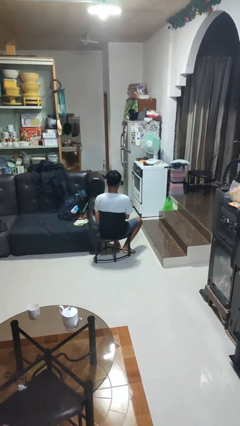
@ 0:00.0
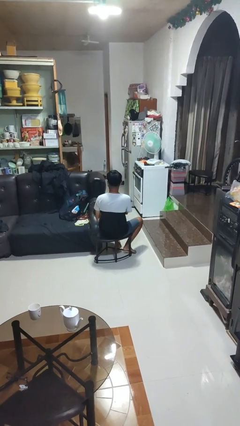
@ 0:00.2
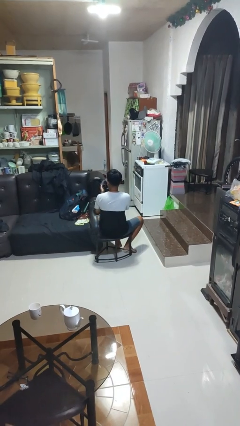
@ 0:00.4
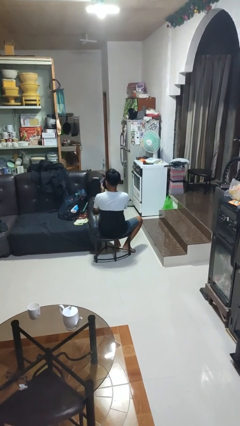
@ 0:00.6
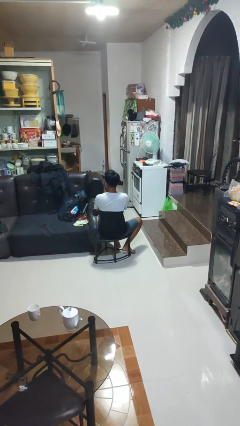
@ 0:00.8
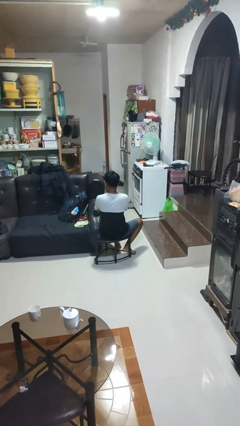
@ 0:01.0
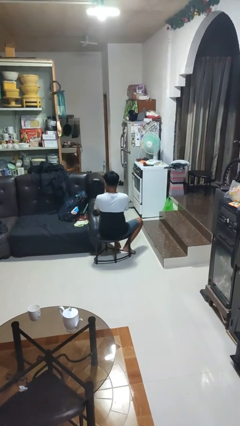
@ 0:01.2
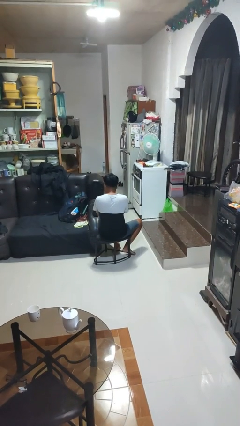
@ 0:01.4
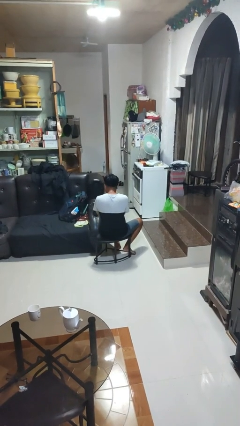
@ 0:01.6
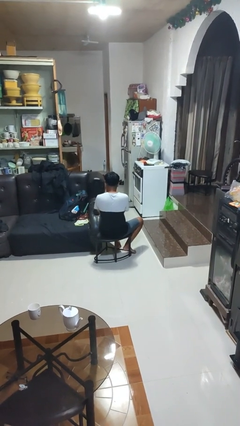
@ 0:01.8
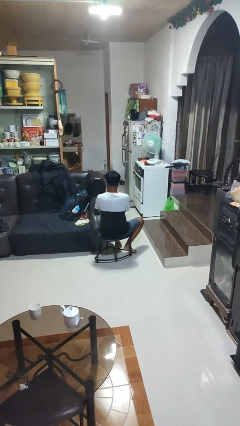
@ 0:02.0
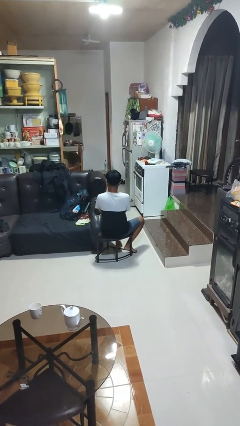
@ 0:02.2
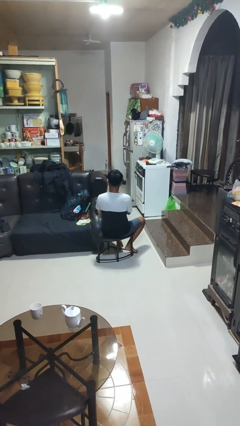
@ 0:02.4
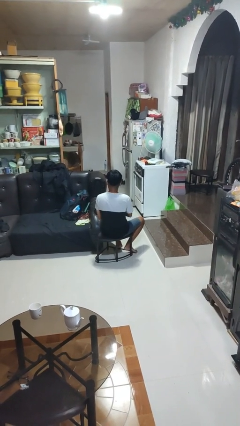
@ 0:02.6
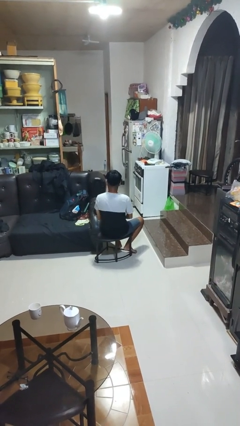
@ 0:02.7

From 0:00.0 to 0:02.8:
person blows nose

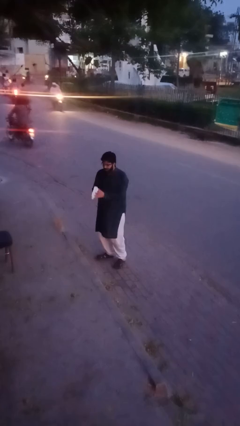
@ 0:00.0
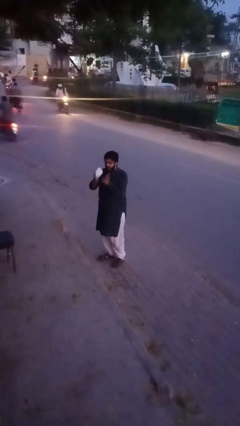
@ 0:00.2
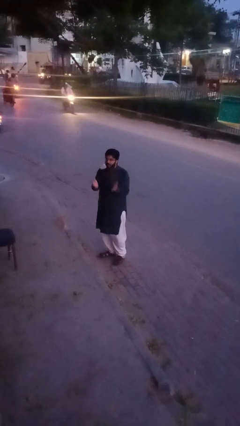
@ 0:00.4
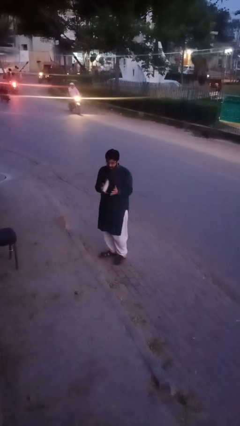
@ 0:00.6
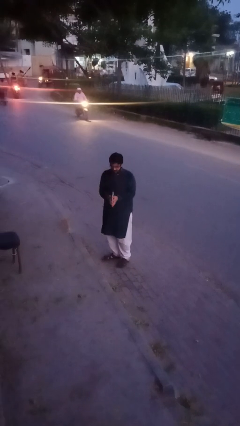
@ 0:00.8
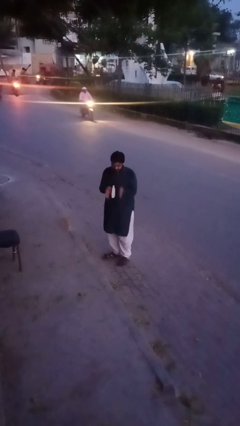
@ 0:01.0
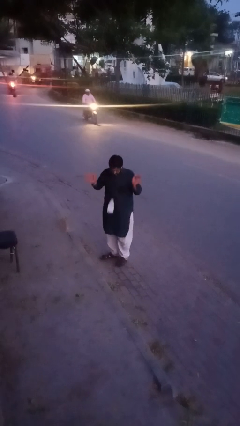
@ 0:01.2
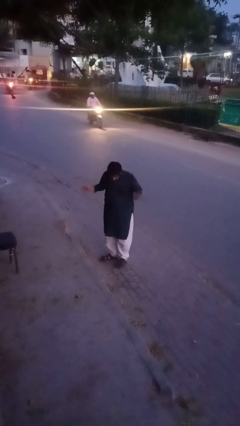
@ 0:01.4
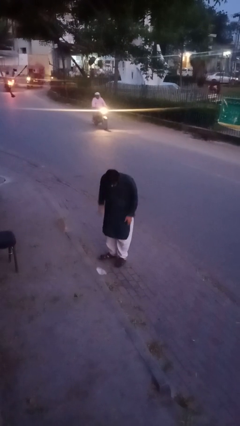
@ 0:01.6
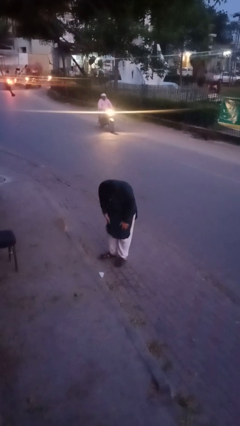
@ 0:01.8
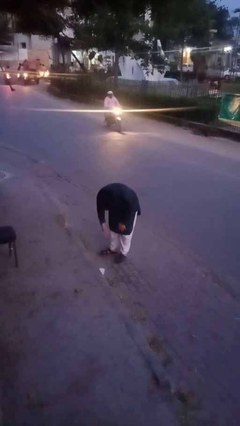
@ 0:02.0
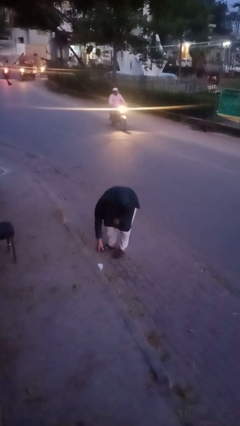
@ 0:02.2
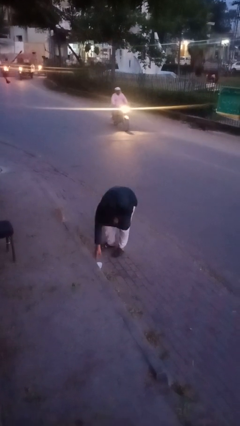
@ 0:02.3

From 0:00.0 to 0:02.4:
person drops object

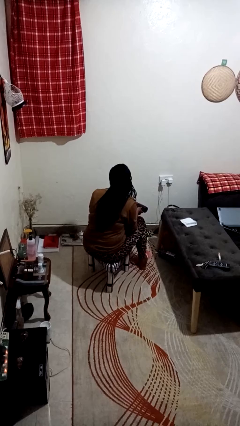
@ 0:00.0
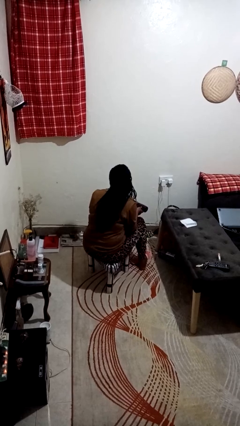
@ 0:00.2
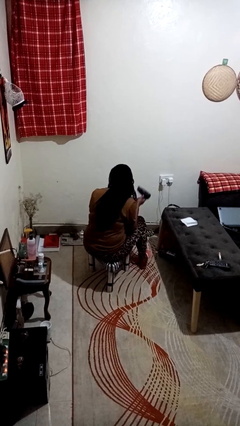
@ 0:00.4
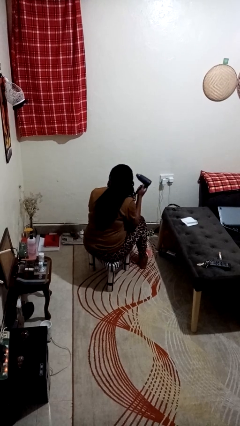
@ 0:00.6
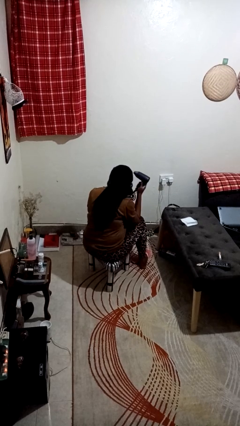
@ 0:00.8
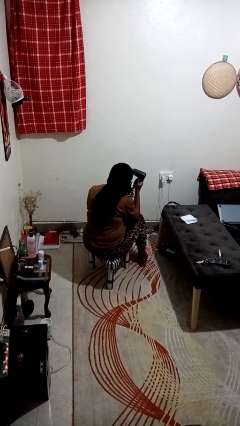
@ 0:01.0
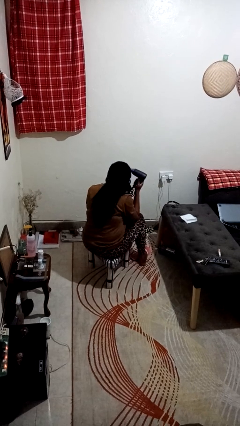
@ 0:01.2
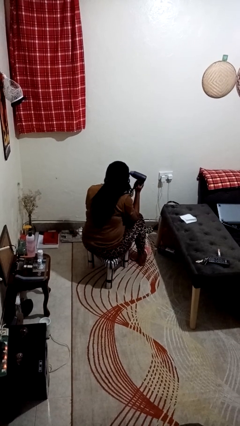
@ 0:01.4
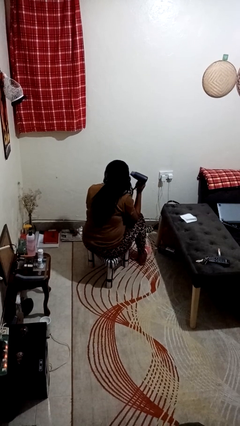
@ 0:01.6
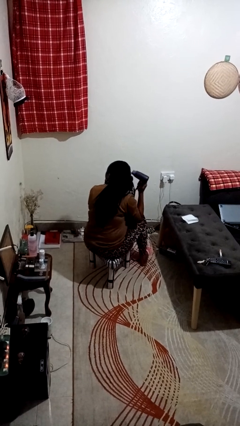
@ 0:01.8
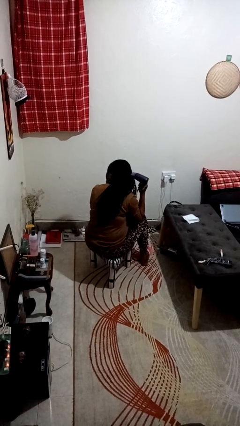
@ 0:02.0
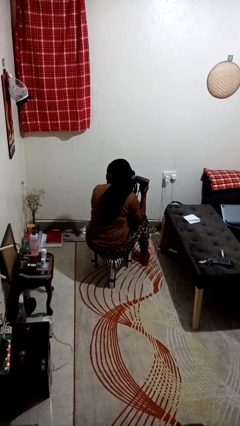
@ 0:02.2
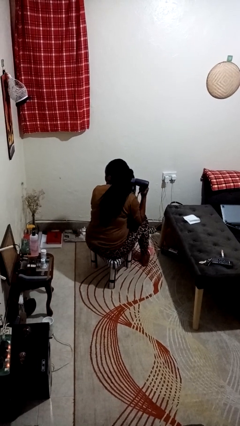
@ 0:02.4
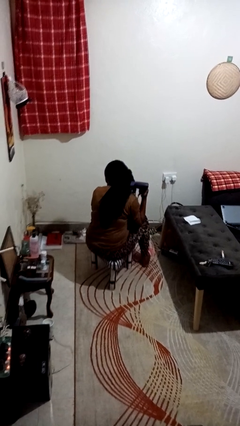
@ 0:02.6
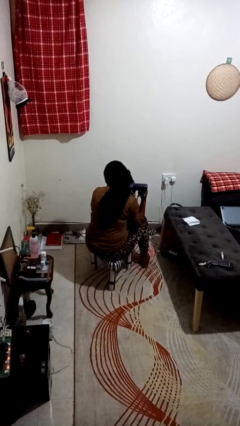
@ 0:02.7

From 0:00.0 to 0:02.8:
person dries hair with hairdryer

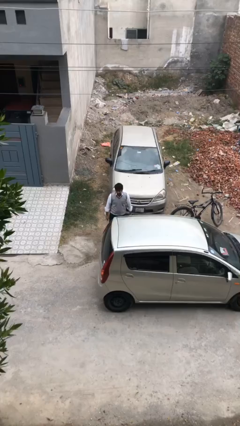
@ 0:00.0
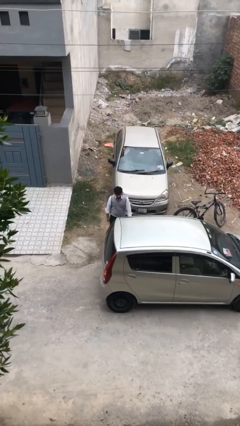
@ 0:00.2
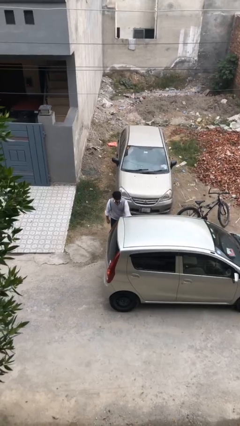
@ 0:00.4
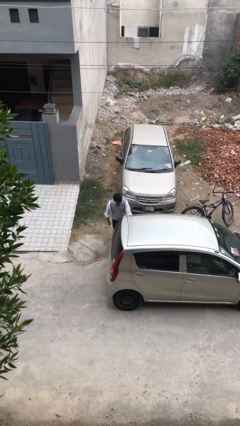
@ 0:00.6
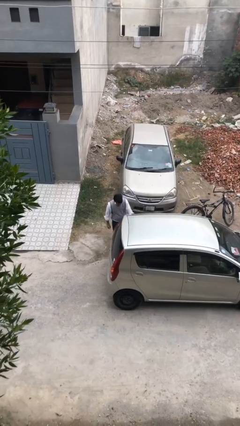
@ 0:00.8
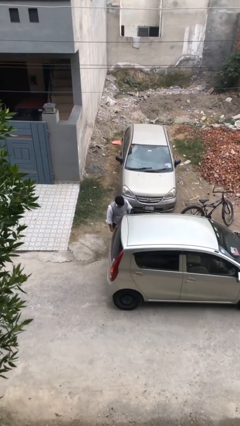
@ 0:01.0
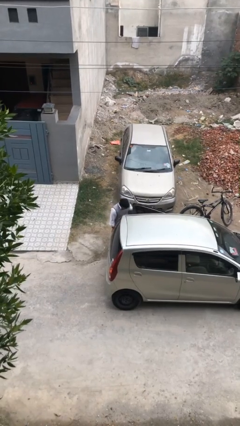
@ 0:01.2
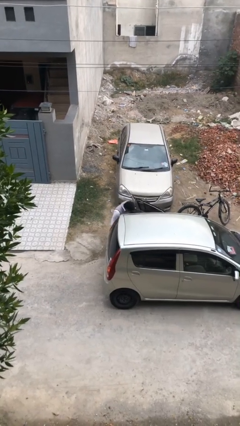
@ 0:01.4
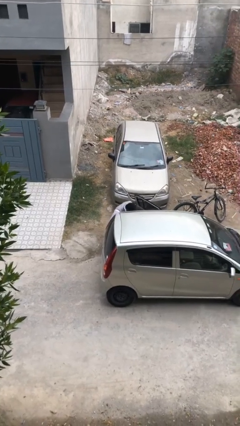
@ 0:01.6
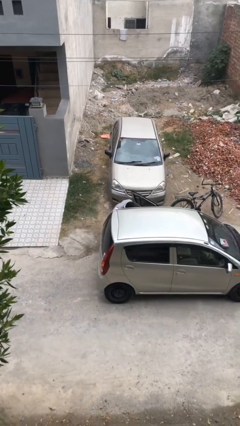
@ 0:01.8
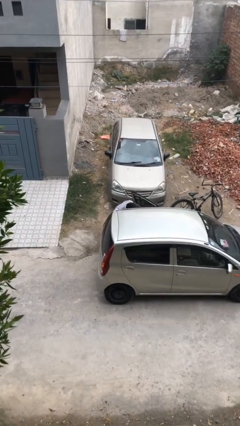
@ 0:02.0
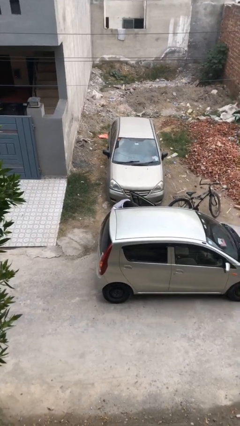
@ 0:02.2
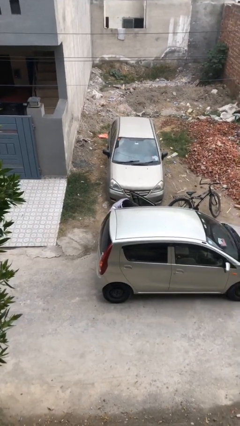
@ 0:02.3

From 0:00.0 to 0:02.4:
person opens car door

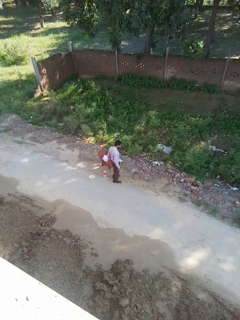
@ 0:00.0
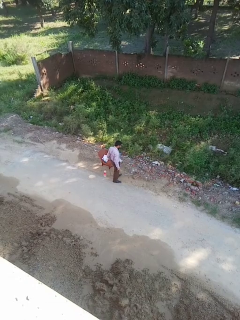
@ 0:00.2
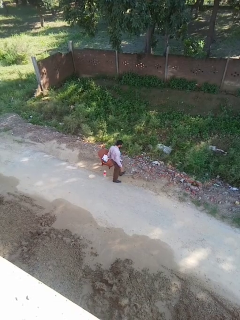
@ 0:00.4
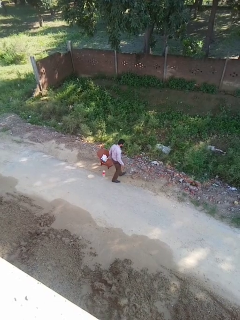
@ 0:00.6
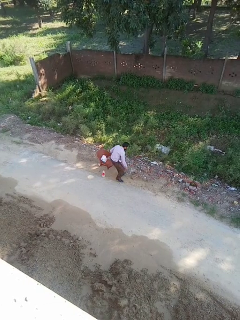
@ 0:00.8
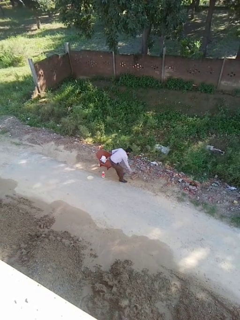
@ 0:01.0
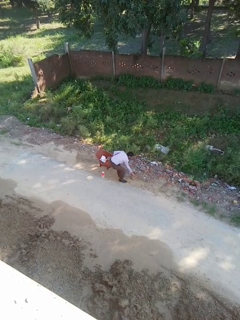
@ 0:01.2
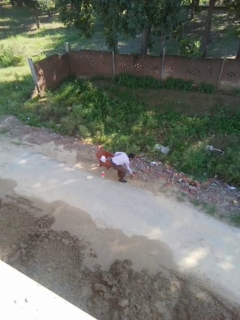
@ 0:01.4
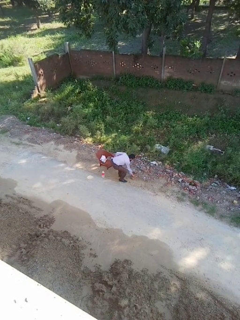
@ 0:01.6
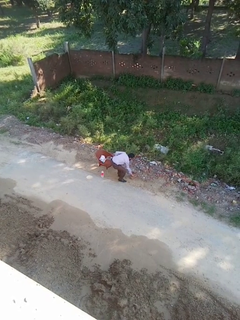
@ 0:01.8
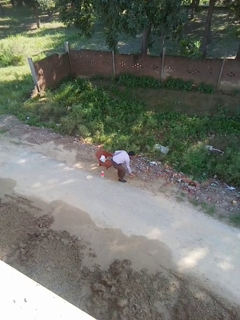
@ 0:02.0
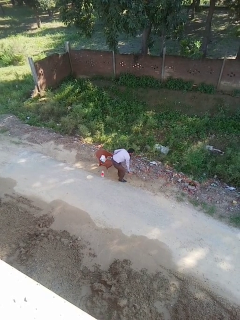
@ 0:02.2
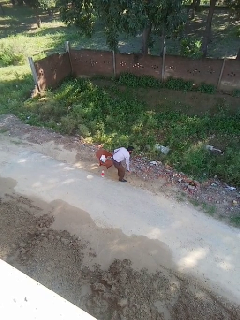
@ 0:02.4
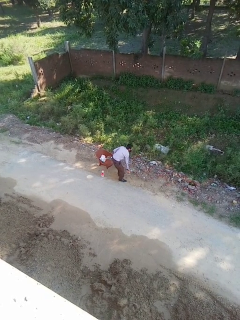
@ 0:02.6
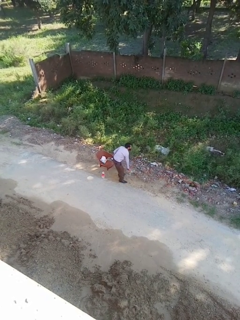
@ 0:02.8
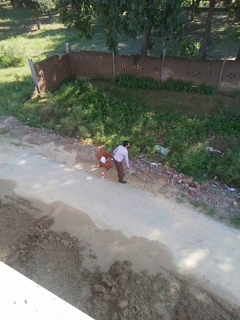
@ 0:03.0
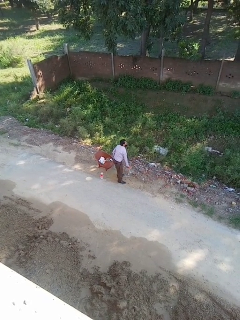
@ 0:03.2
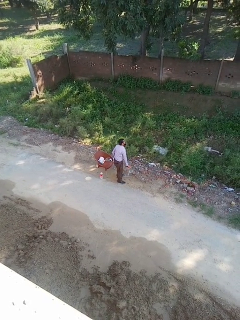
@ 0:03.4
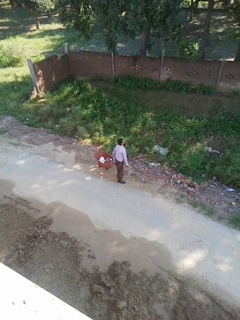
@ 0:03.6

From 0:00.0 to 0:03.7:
person picks up object from floor

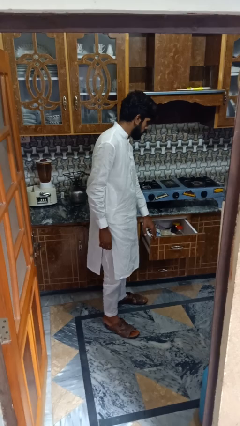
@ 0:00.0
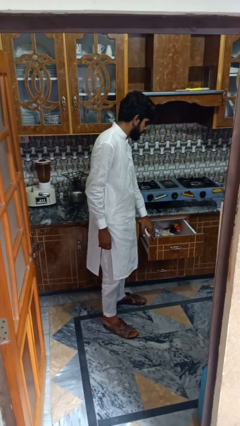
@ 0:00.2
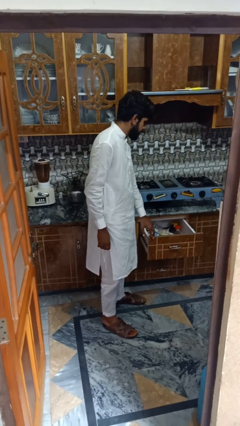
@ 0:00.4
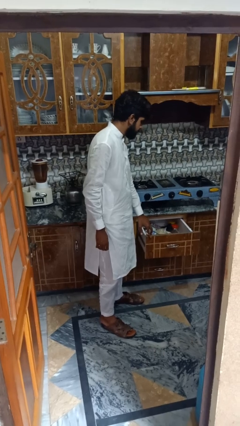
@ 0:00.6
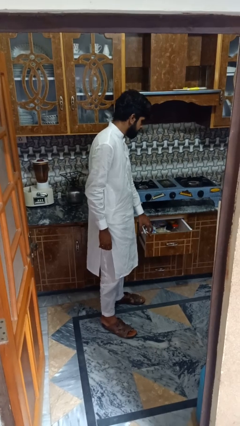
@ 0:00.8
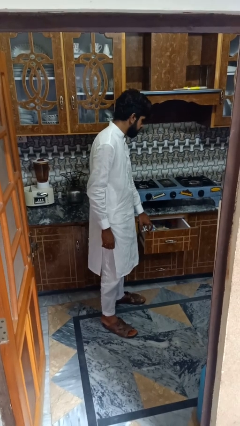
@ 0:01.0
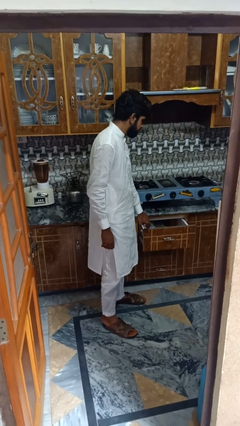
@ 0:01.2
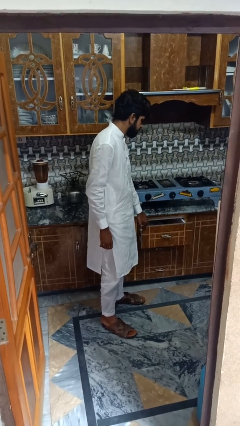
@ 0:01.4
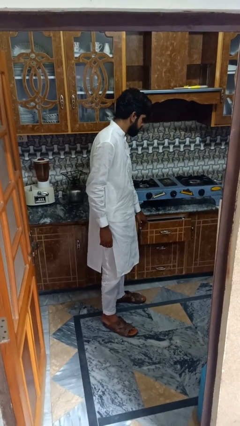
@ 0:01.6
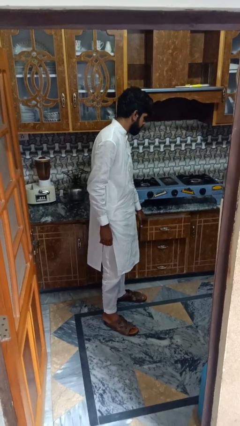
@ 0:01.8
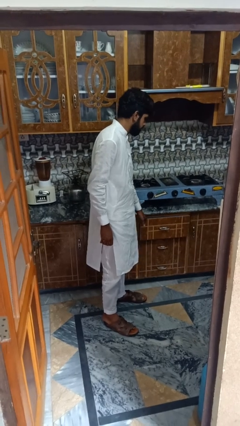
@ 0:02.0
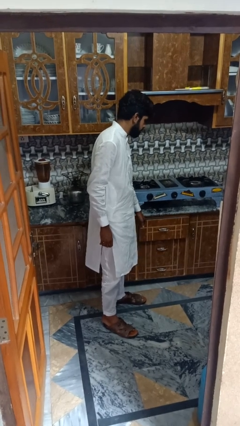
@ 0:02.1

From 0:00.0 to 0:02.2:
person closes kitchen drawer

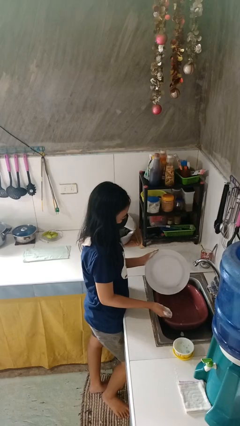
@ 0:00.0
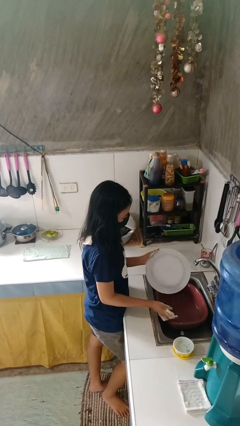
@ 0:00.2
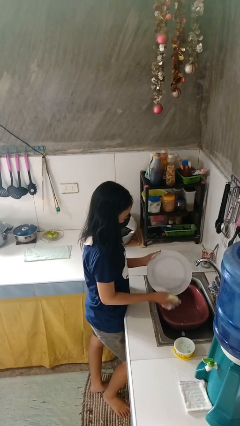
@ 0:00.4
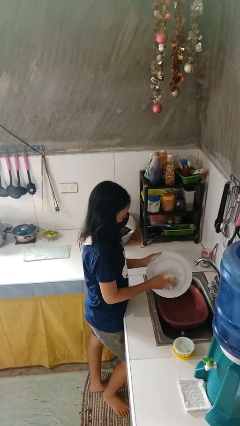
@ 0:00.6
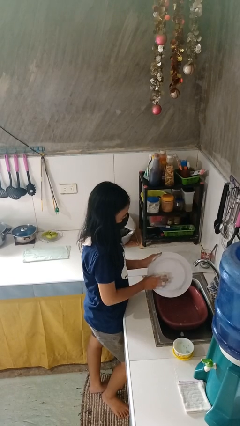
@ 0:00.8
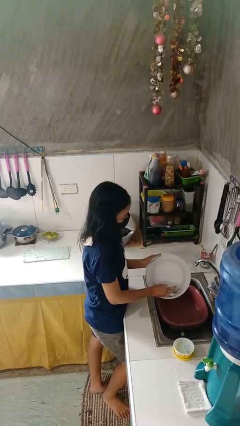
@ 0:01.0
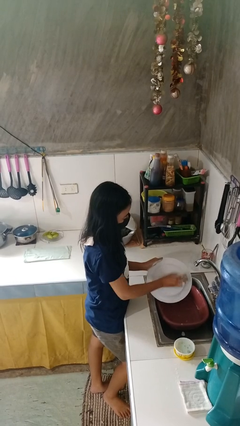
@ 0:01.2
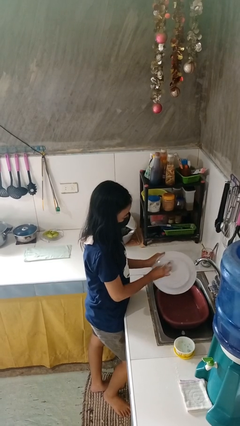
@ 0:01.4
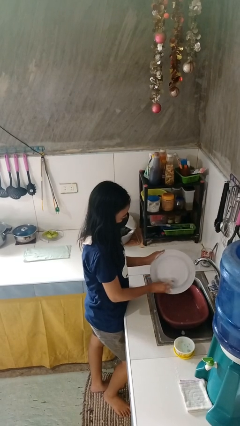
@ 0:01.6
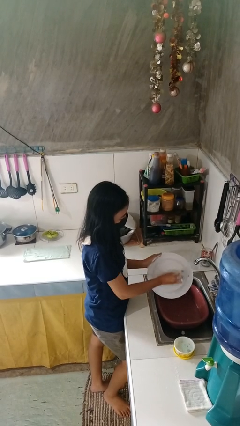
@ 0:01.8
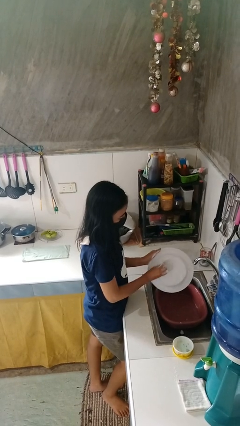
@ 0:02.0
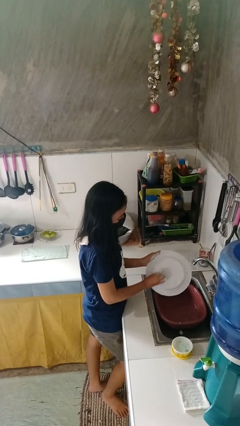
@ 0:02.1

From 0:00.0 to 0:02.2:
person washes dish
